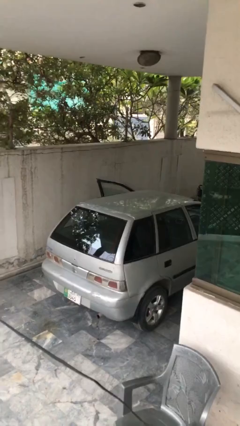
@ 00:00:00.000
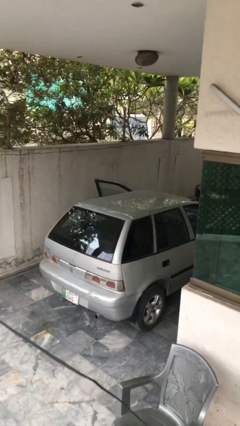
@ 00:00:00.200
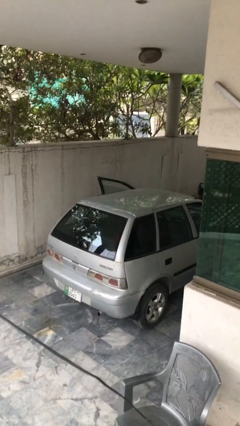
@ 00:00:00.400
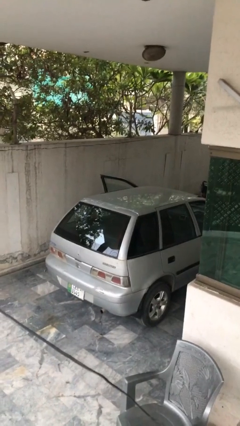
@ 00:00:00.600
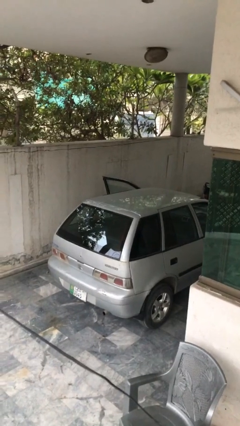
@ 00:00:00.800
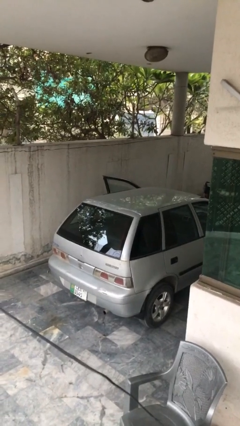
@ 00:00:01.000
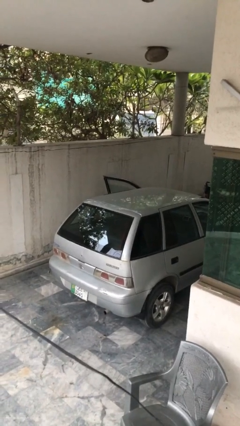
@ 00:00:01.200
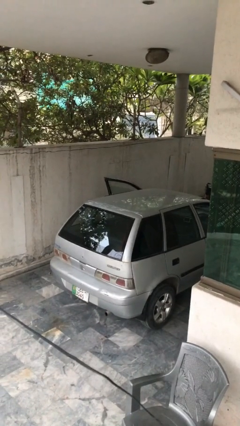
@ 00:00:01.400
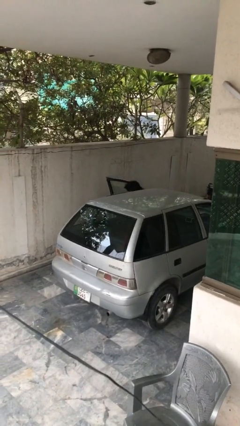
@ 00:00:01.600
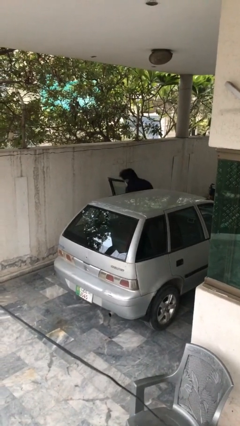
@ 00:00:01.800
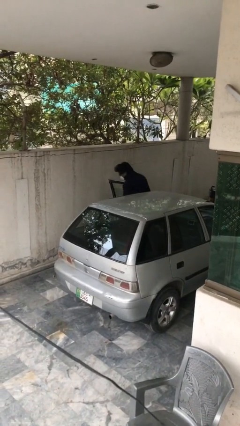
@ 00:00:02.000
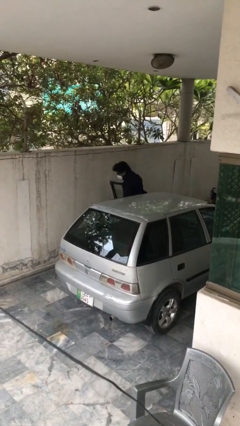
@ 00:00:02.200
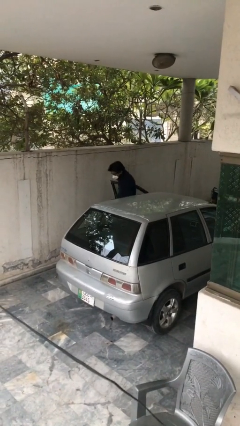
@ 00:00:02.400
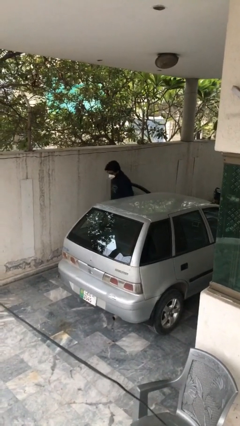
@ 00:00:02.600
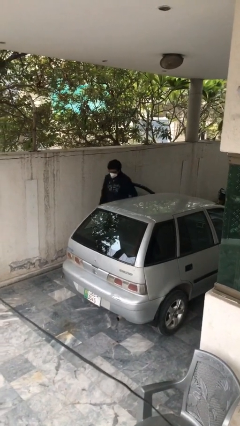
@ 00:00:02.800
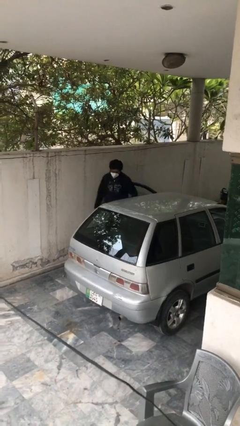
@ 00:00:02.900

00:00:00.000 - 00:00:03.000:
person exits car

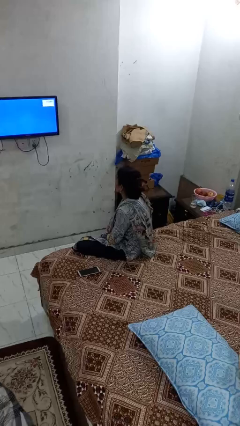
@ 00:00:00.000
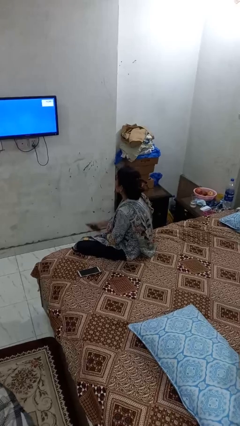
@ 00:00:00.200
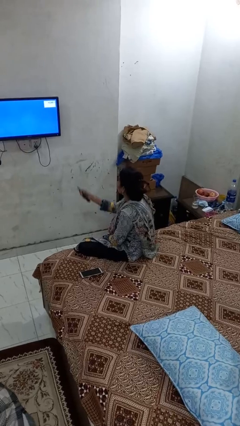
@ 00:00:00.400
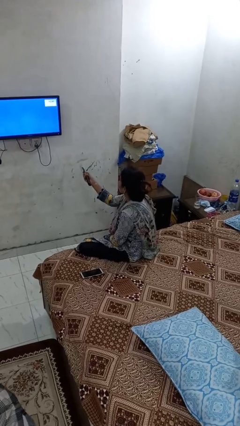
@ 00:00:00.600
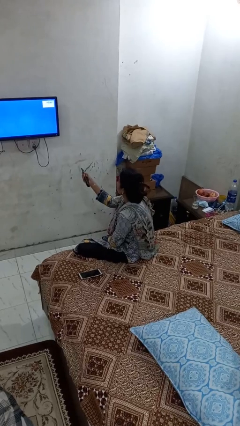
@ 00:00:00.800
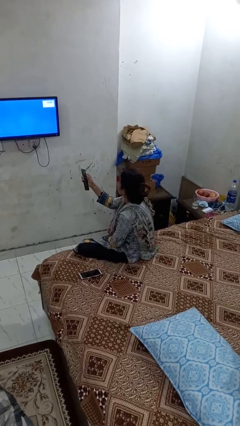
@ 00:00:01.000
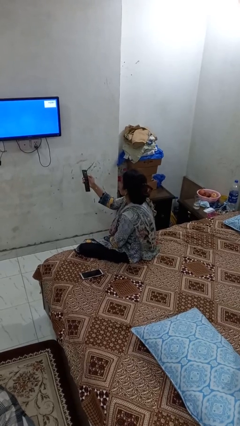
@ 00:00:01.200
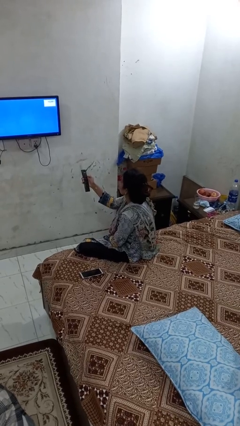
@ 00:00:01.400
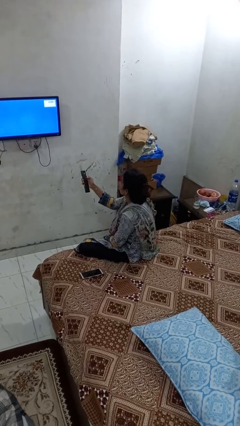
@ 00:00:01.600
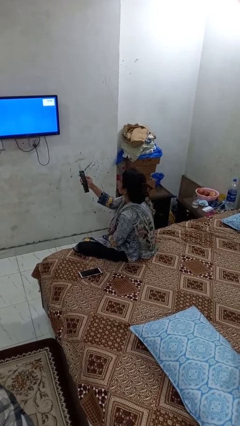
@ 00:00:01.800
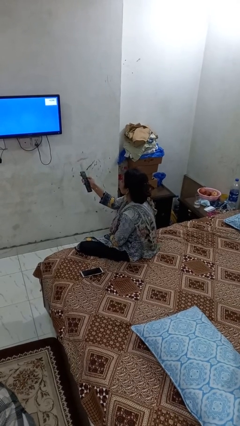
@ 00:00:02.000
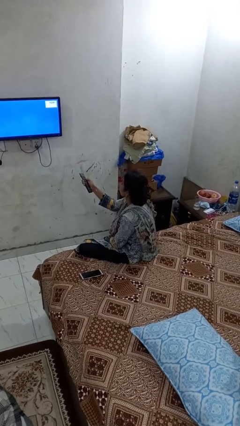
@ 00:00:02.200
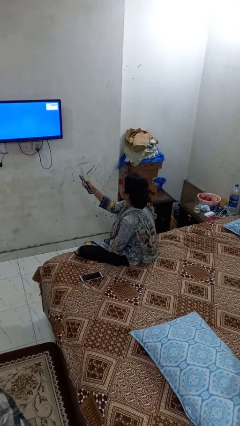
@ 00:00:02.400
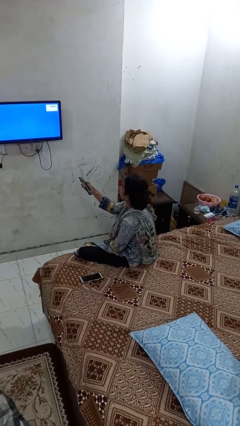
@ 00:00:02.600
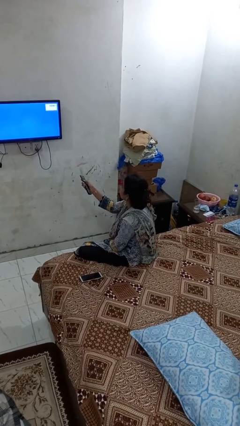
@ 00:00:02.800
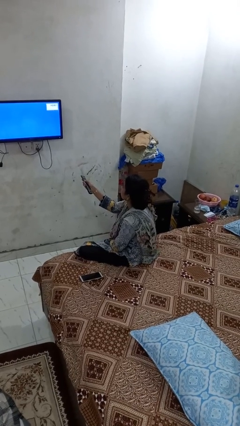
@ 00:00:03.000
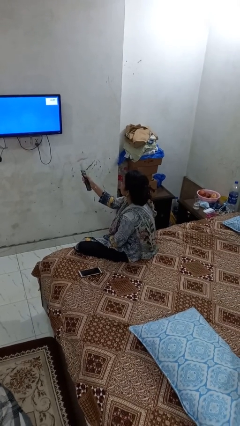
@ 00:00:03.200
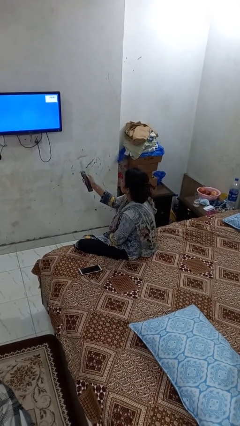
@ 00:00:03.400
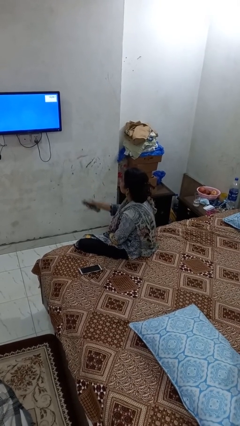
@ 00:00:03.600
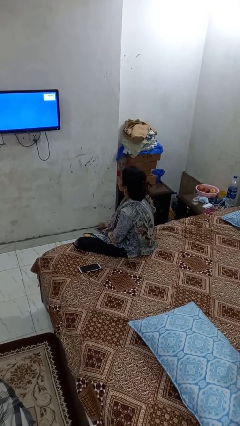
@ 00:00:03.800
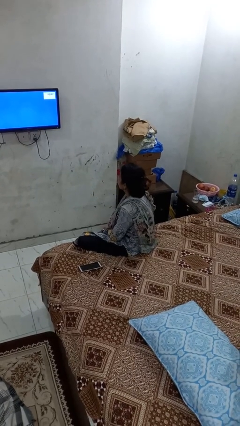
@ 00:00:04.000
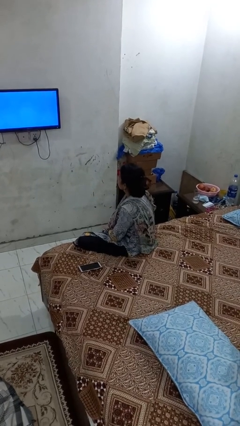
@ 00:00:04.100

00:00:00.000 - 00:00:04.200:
person uses television remote

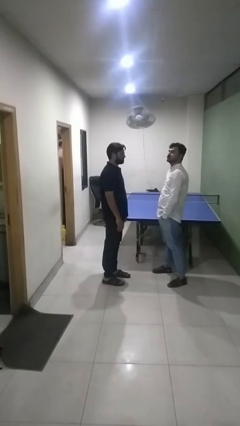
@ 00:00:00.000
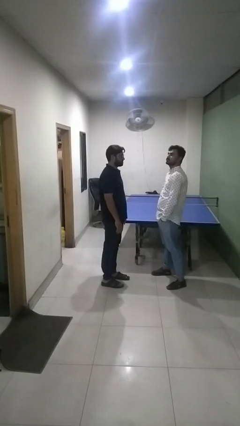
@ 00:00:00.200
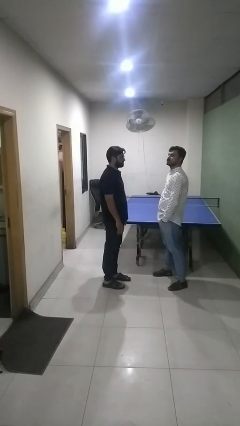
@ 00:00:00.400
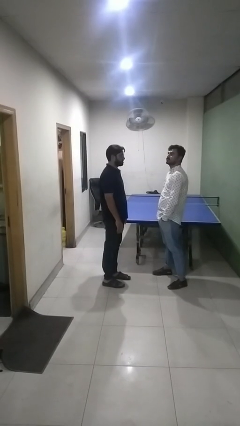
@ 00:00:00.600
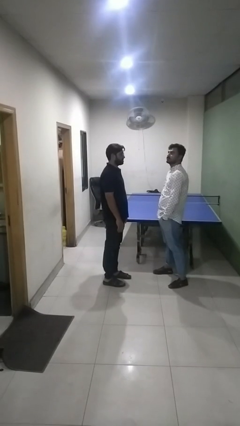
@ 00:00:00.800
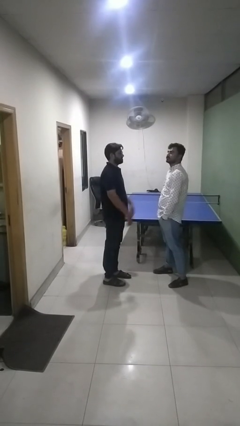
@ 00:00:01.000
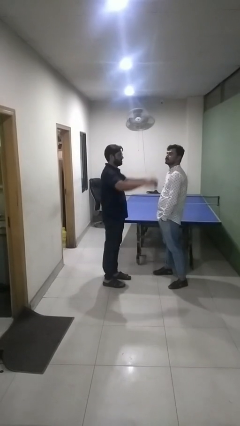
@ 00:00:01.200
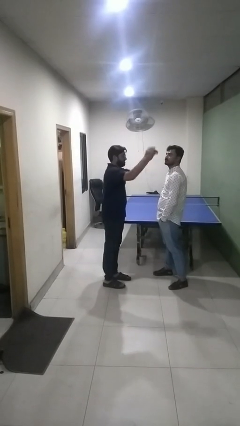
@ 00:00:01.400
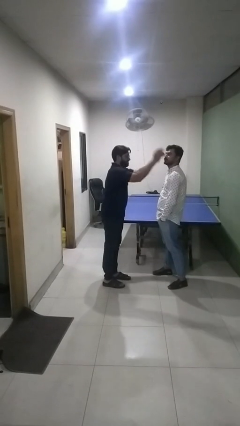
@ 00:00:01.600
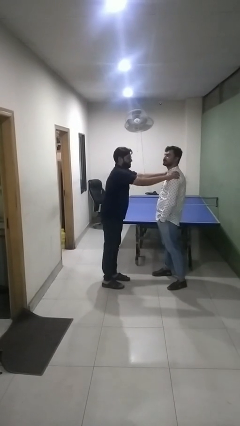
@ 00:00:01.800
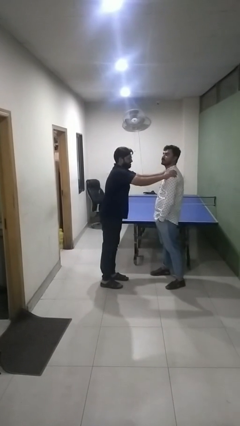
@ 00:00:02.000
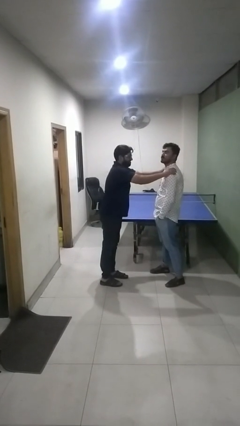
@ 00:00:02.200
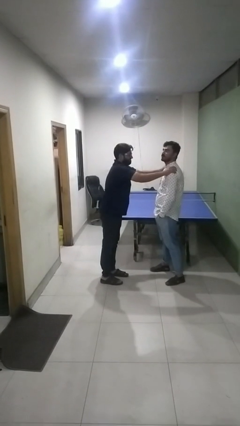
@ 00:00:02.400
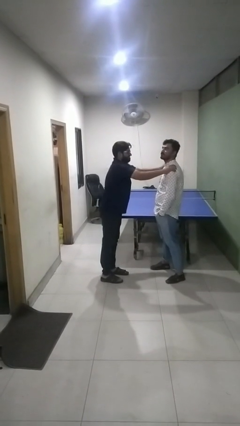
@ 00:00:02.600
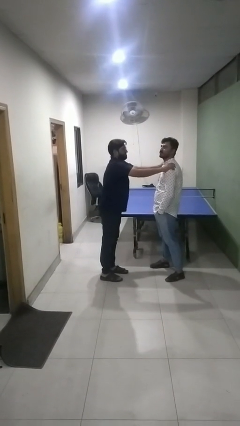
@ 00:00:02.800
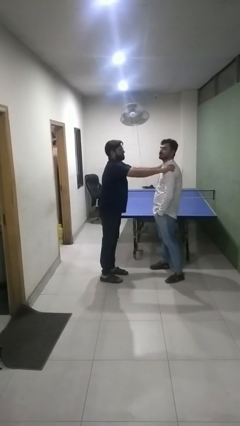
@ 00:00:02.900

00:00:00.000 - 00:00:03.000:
person points at person

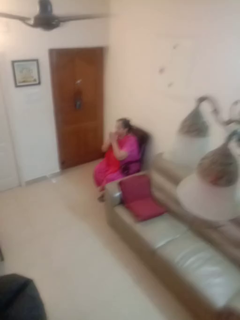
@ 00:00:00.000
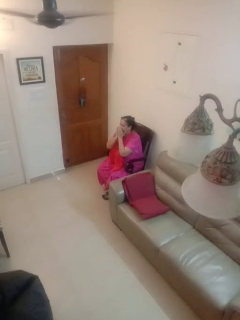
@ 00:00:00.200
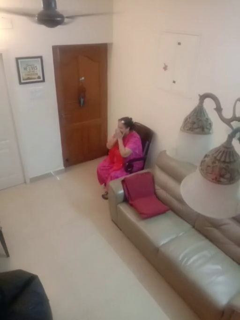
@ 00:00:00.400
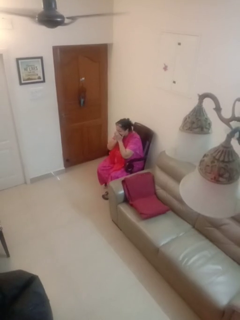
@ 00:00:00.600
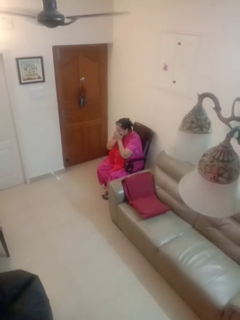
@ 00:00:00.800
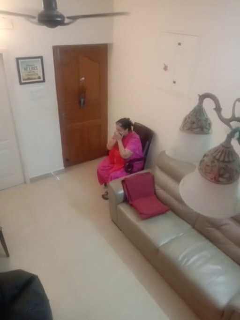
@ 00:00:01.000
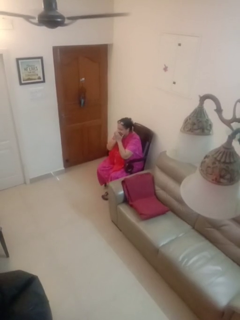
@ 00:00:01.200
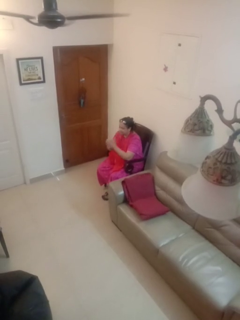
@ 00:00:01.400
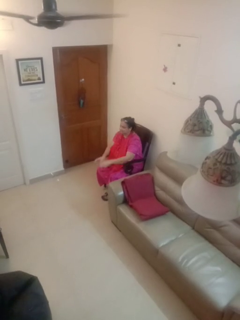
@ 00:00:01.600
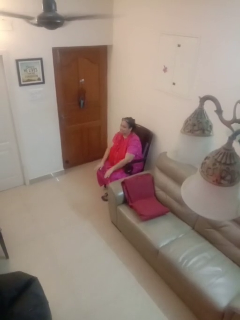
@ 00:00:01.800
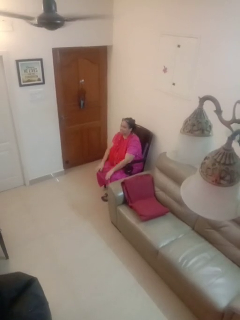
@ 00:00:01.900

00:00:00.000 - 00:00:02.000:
person sneezes into hand

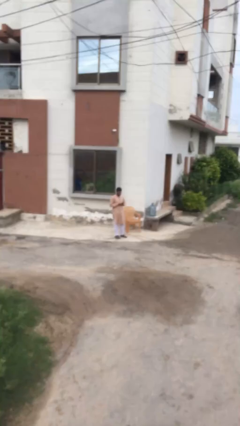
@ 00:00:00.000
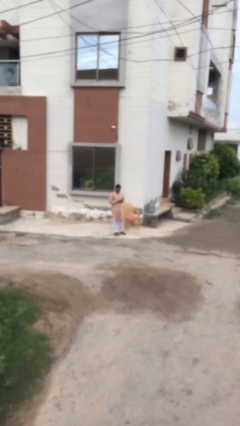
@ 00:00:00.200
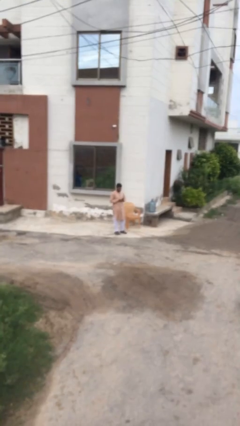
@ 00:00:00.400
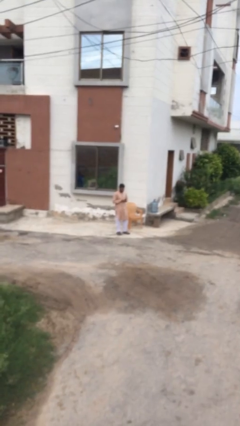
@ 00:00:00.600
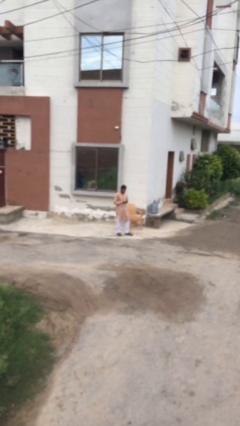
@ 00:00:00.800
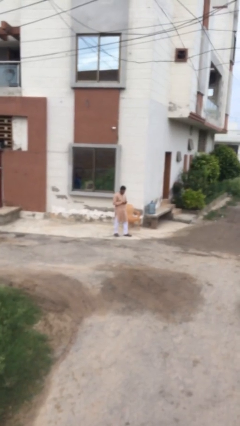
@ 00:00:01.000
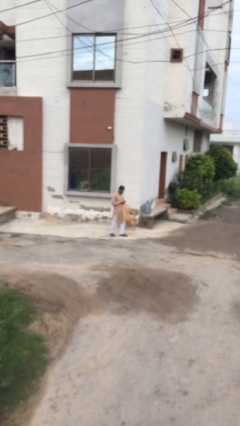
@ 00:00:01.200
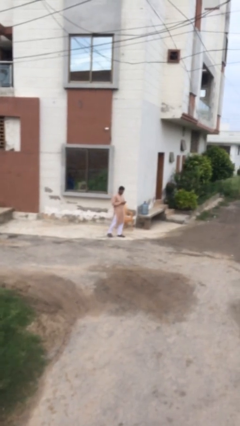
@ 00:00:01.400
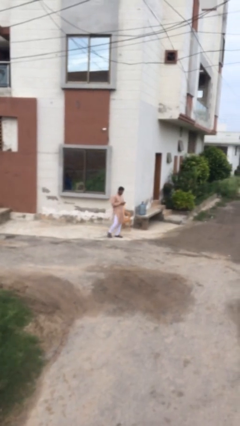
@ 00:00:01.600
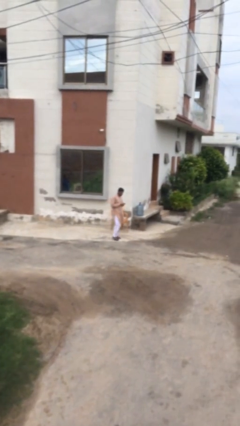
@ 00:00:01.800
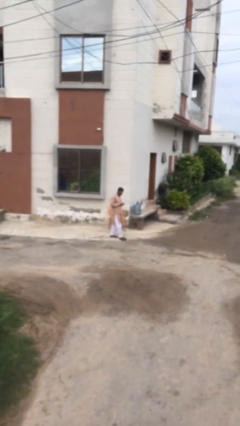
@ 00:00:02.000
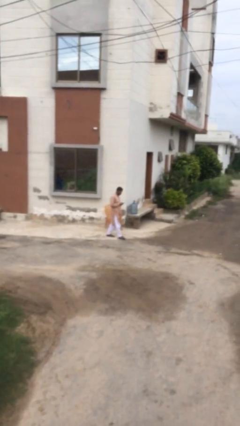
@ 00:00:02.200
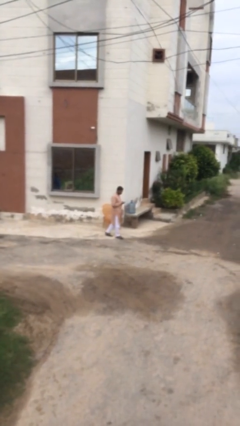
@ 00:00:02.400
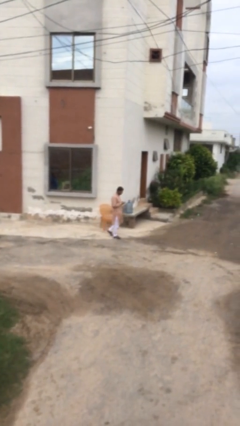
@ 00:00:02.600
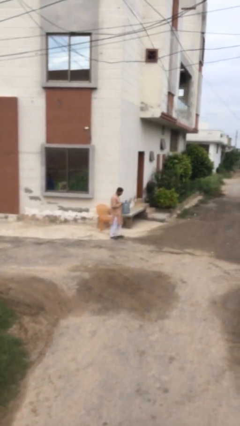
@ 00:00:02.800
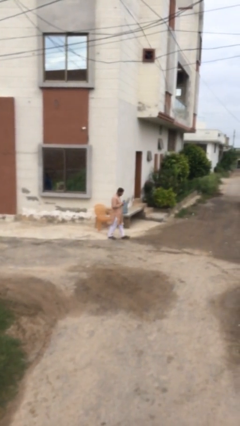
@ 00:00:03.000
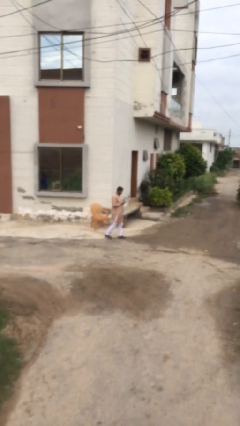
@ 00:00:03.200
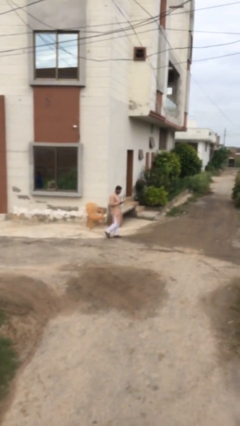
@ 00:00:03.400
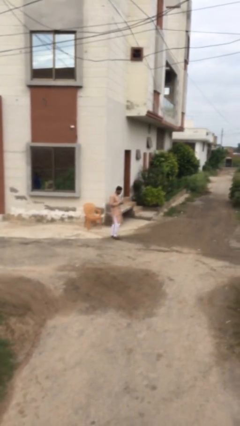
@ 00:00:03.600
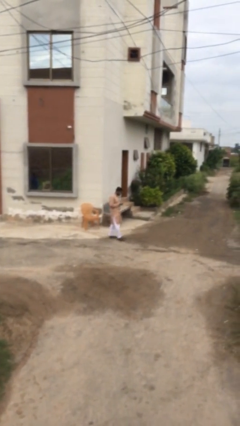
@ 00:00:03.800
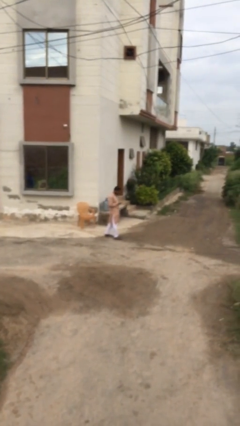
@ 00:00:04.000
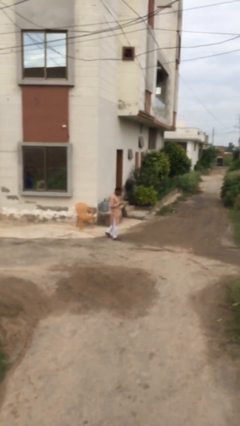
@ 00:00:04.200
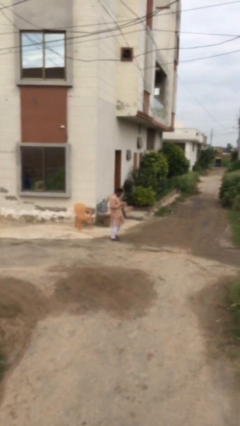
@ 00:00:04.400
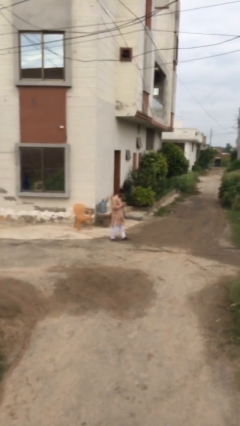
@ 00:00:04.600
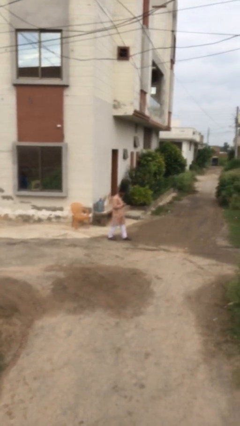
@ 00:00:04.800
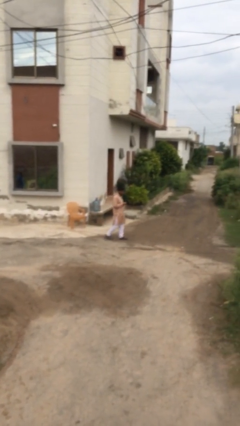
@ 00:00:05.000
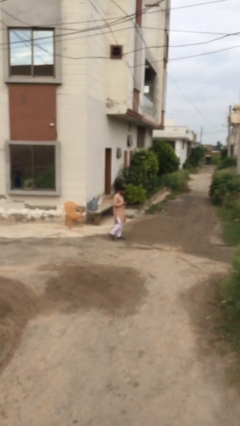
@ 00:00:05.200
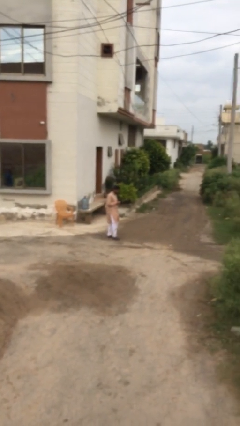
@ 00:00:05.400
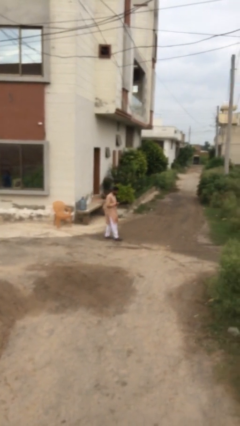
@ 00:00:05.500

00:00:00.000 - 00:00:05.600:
person texts on phone
